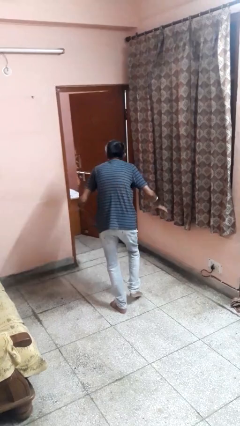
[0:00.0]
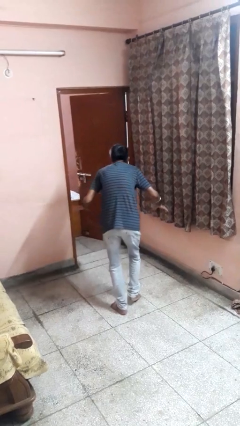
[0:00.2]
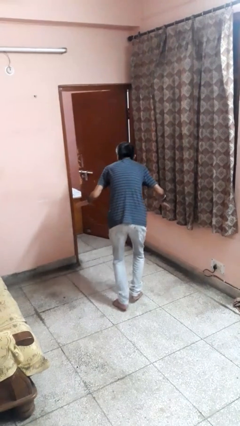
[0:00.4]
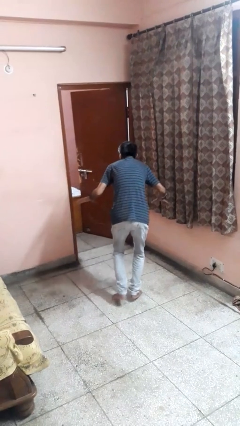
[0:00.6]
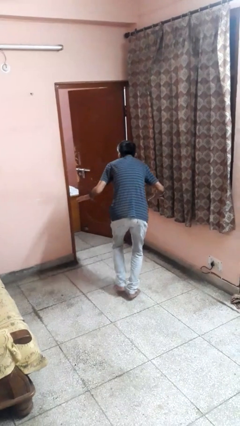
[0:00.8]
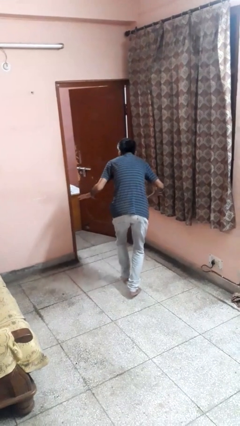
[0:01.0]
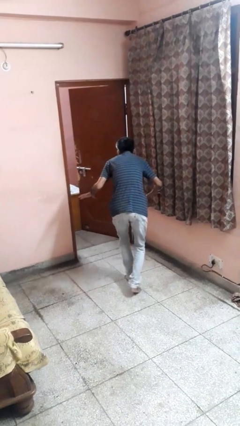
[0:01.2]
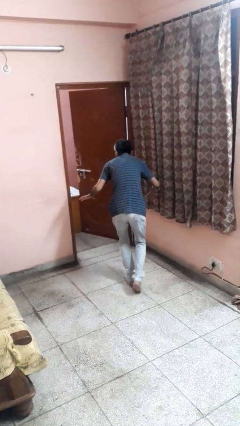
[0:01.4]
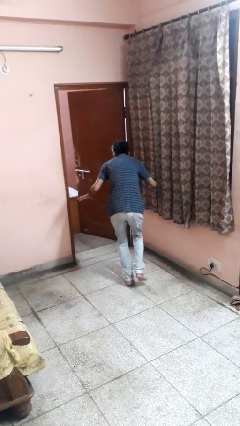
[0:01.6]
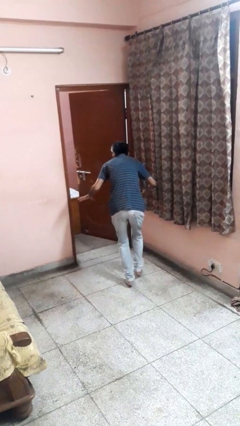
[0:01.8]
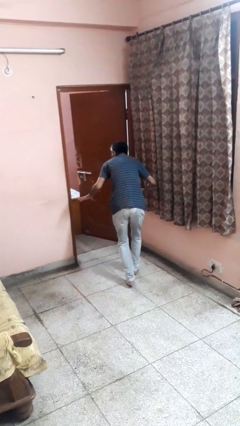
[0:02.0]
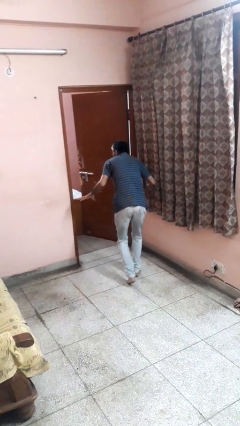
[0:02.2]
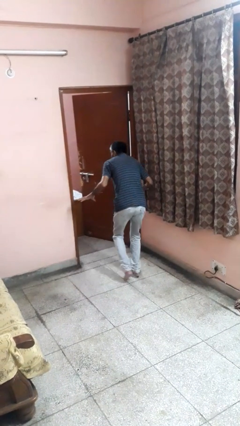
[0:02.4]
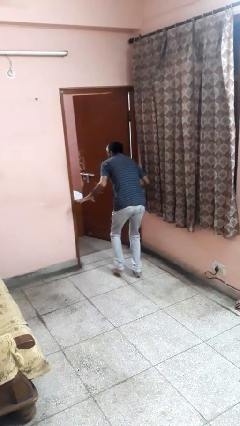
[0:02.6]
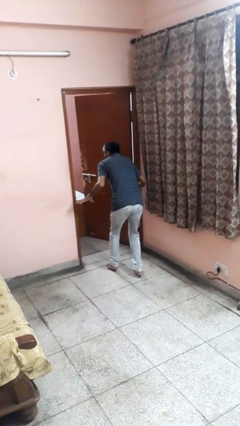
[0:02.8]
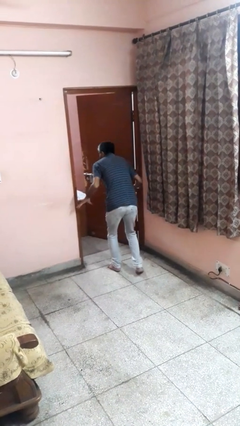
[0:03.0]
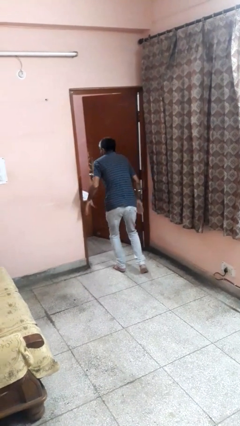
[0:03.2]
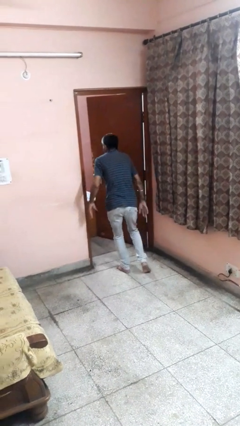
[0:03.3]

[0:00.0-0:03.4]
person walks tiptoe

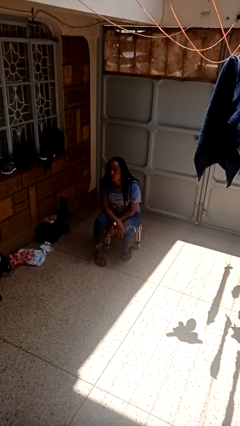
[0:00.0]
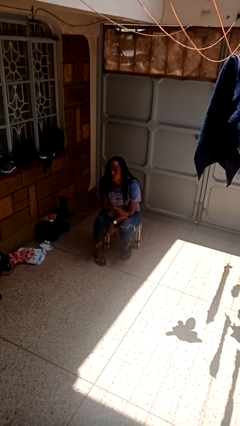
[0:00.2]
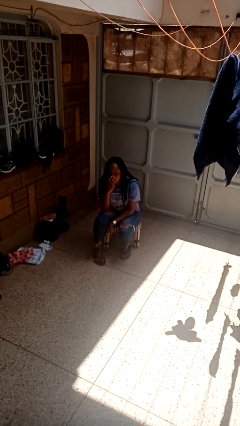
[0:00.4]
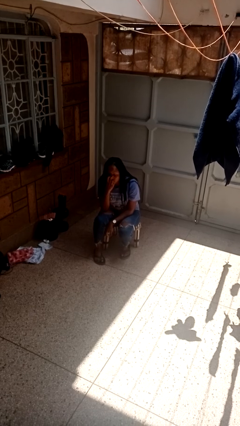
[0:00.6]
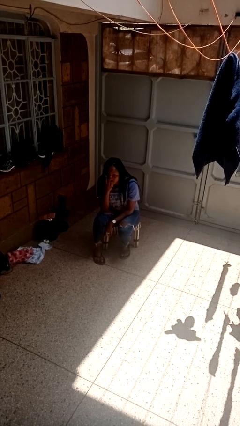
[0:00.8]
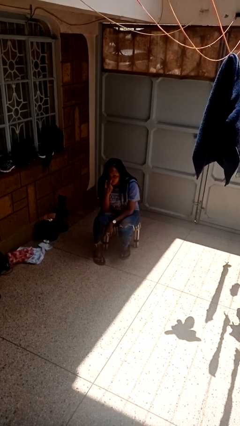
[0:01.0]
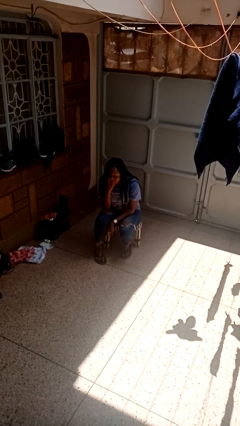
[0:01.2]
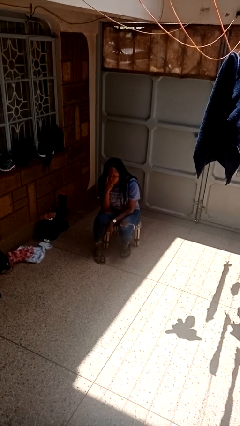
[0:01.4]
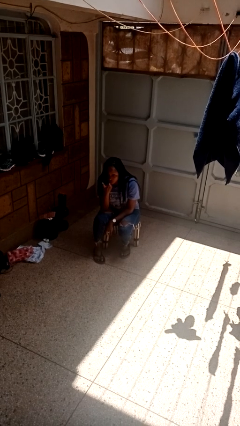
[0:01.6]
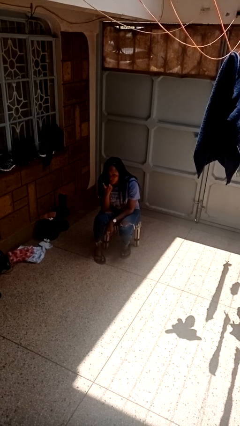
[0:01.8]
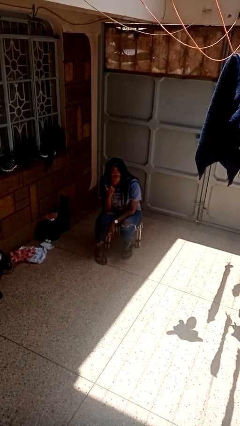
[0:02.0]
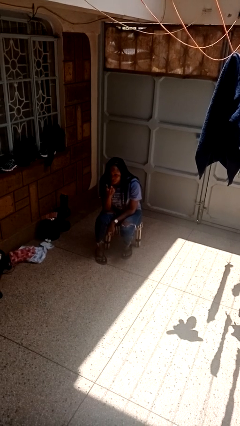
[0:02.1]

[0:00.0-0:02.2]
person gestures watch closely

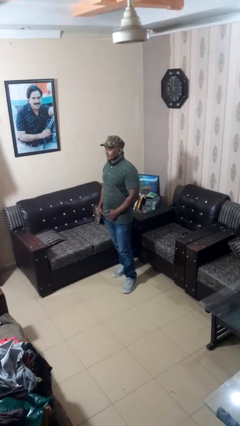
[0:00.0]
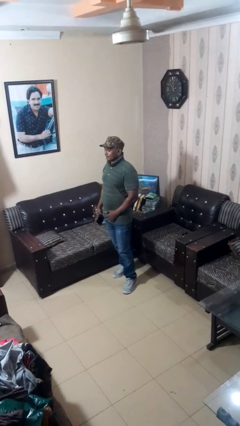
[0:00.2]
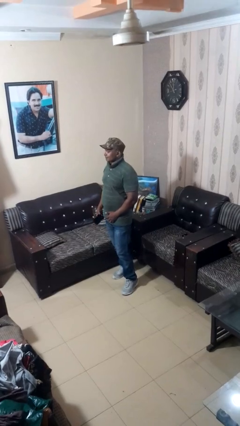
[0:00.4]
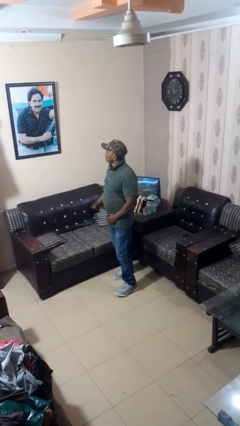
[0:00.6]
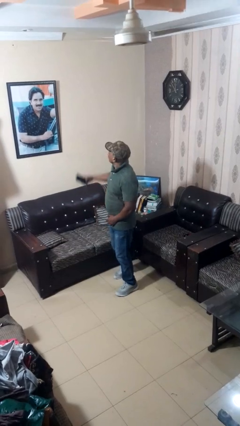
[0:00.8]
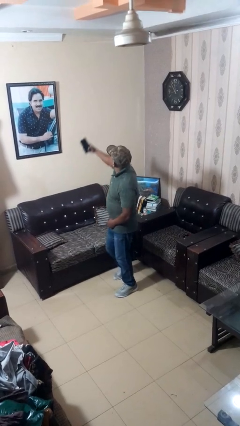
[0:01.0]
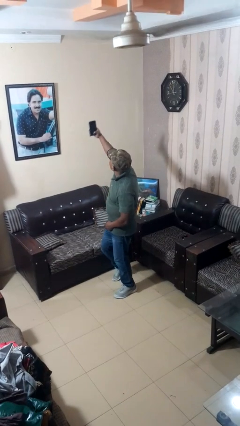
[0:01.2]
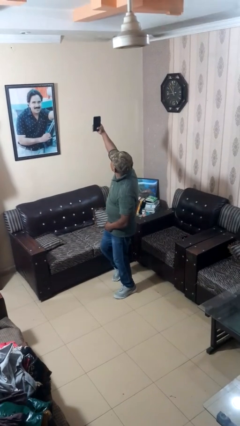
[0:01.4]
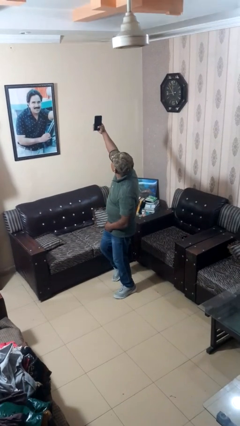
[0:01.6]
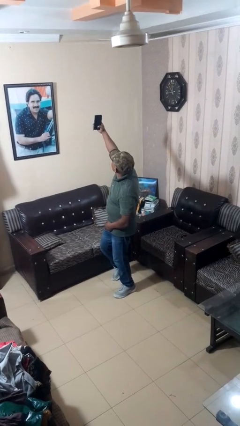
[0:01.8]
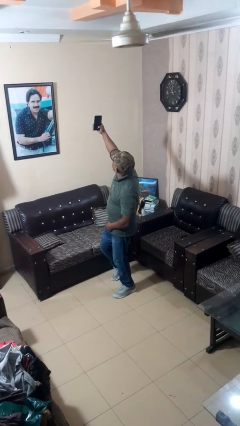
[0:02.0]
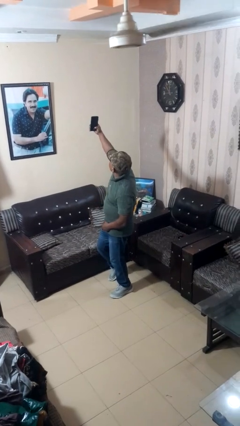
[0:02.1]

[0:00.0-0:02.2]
person takes selfie

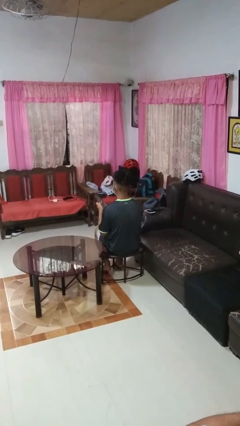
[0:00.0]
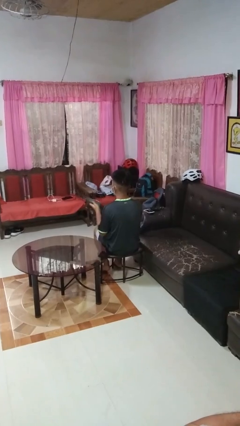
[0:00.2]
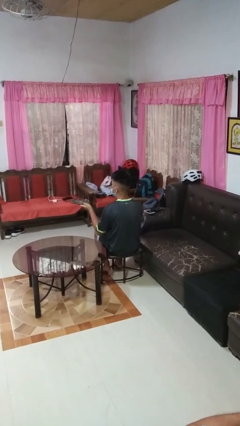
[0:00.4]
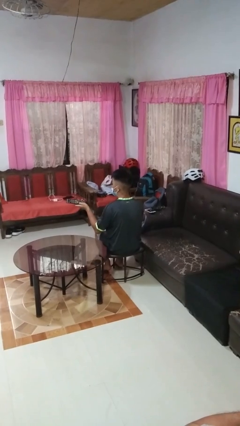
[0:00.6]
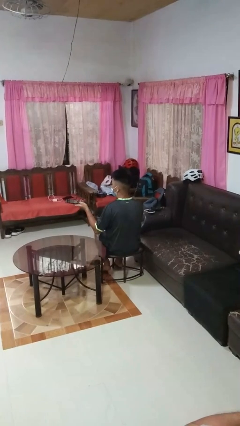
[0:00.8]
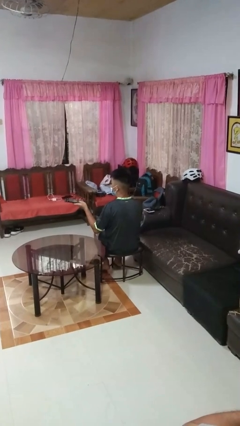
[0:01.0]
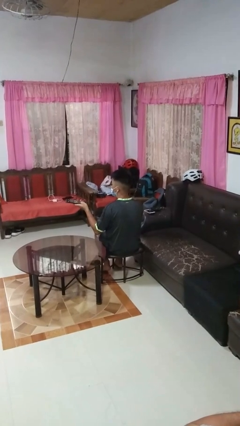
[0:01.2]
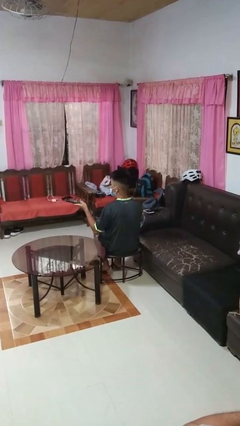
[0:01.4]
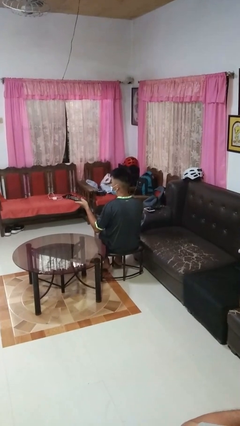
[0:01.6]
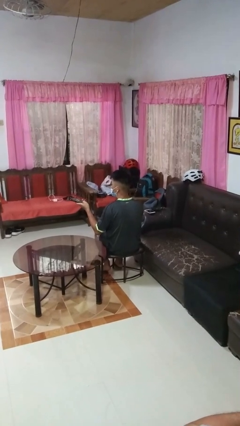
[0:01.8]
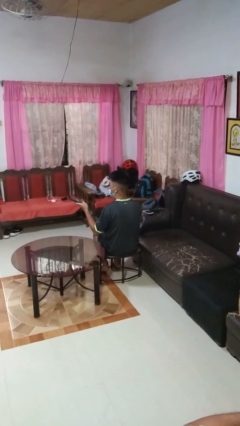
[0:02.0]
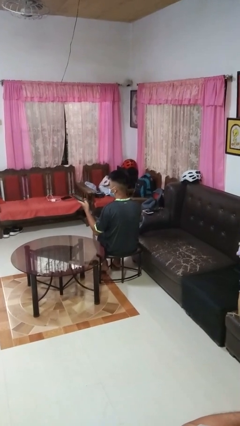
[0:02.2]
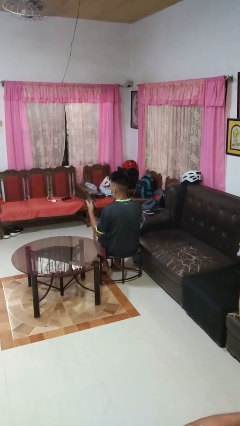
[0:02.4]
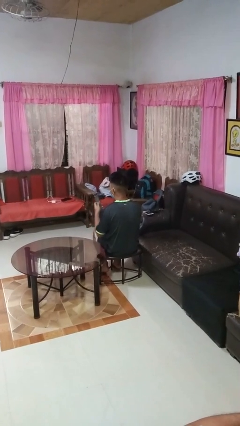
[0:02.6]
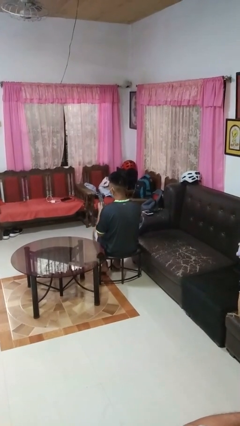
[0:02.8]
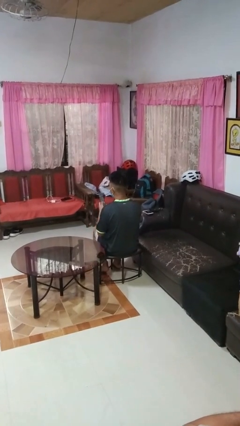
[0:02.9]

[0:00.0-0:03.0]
person uses television remote

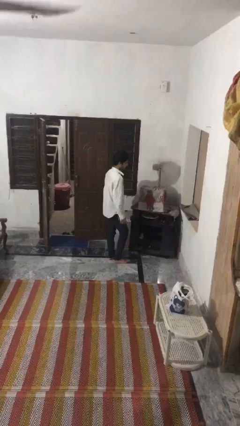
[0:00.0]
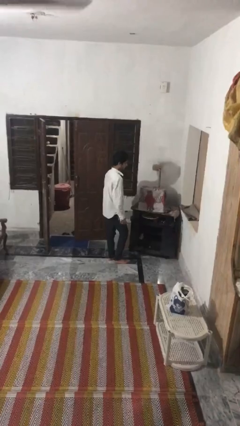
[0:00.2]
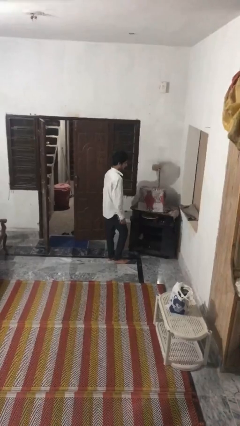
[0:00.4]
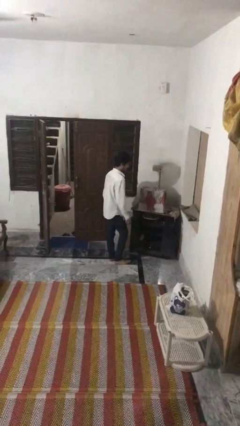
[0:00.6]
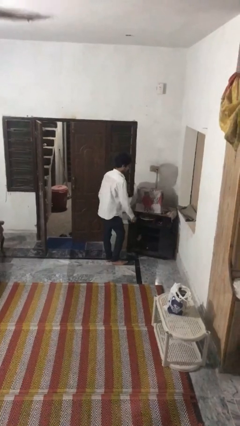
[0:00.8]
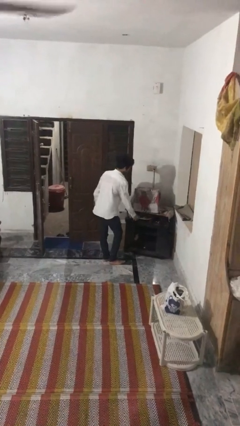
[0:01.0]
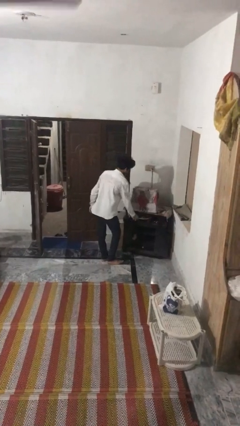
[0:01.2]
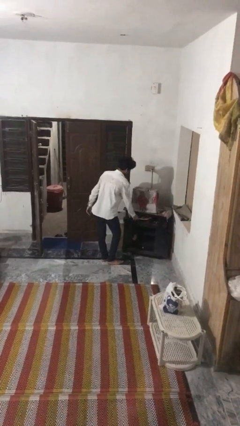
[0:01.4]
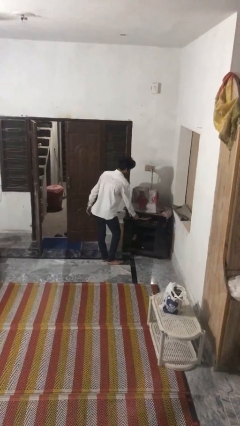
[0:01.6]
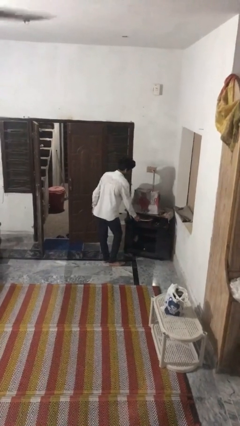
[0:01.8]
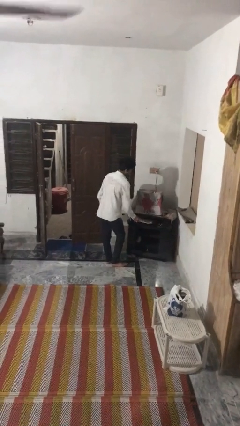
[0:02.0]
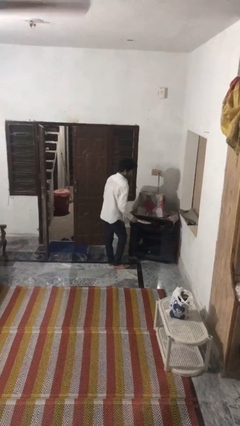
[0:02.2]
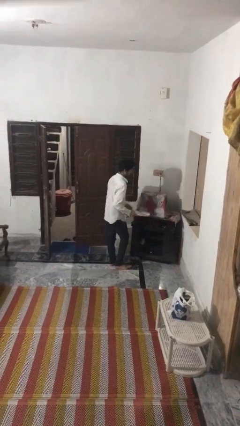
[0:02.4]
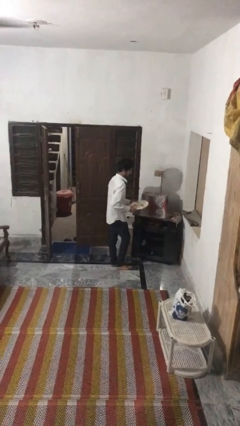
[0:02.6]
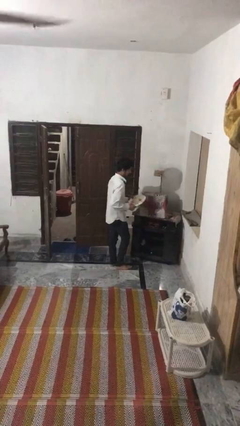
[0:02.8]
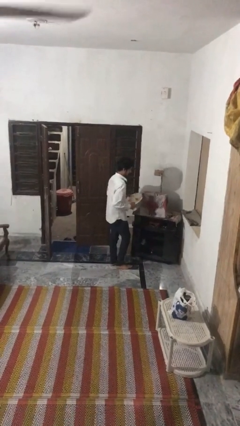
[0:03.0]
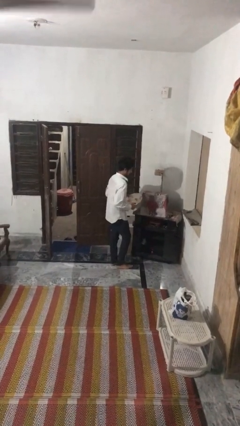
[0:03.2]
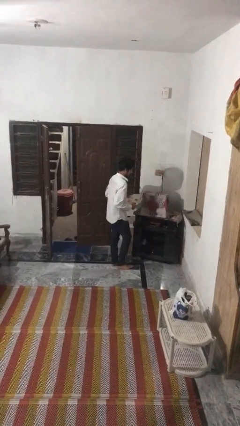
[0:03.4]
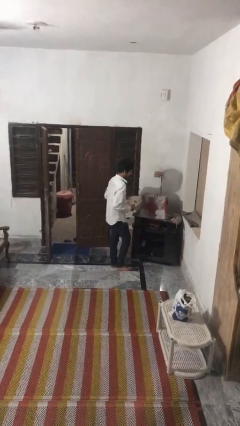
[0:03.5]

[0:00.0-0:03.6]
person picks up object from cabinet

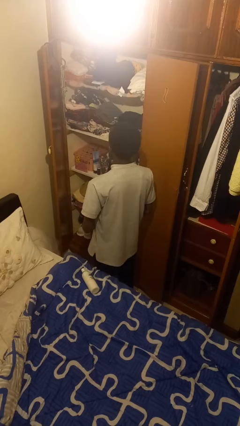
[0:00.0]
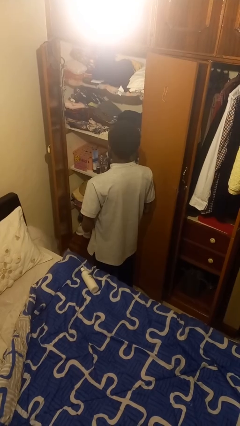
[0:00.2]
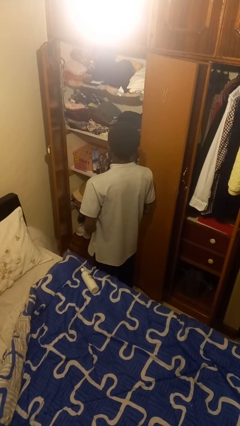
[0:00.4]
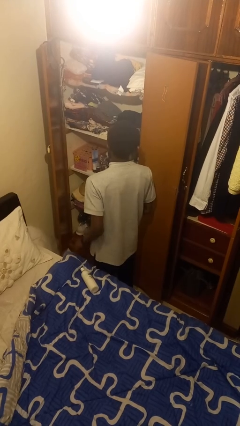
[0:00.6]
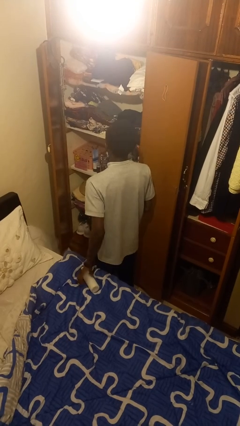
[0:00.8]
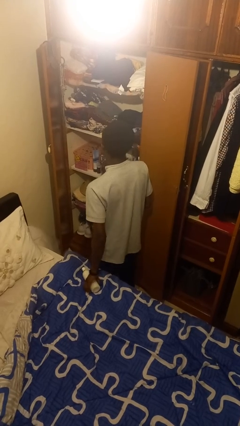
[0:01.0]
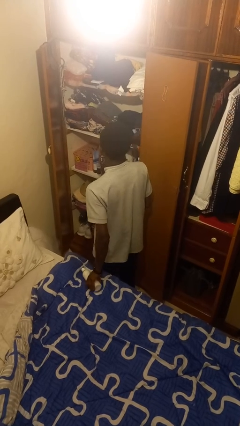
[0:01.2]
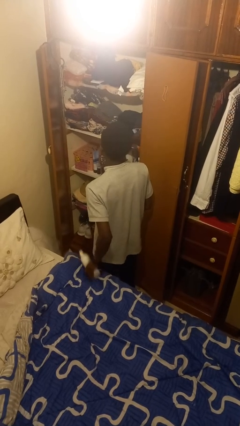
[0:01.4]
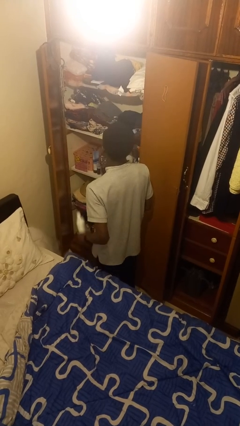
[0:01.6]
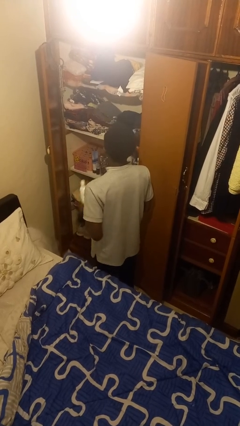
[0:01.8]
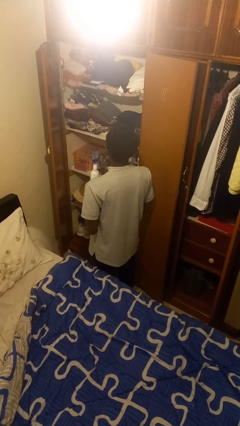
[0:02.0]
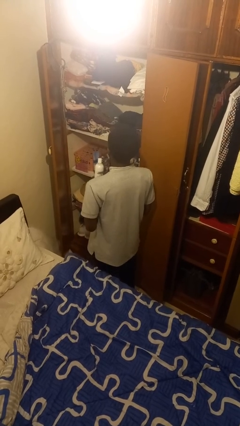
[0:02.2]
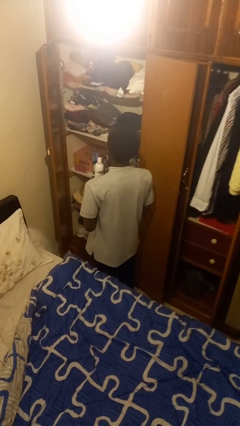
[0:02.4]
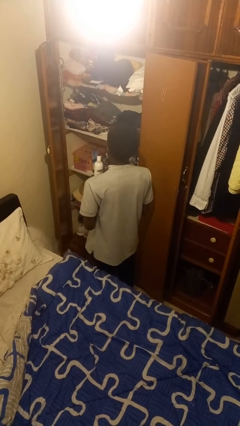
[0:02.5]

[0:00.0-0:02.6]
person picks up object from bed

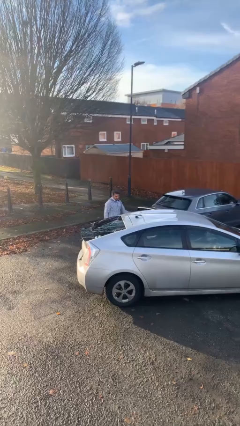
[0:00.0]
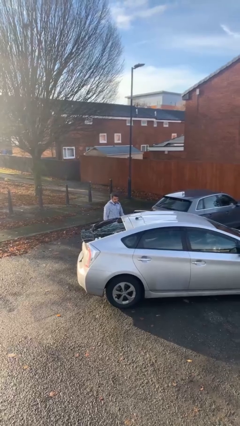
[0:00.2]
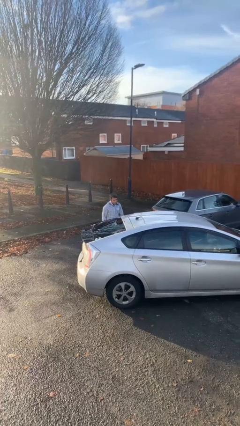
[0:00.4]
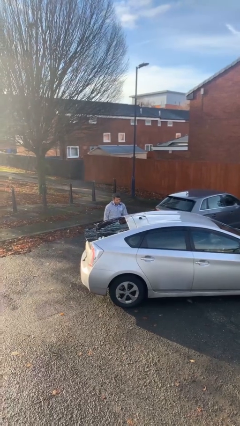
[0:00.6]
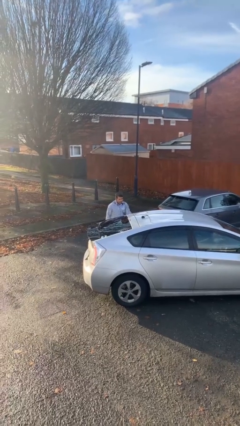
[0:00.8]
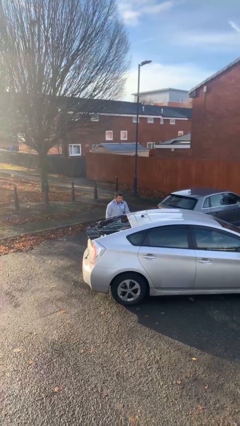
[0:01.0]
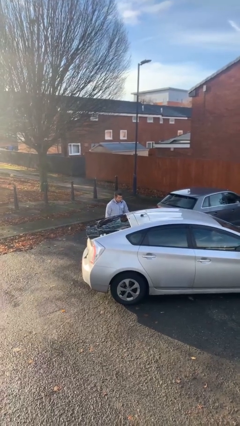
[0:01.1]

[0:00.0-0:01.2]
person closes car door
